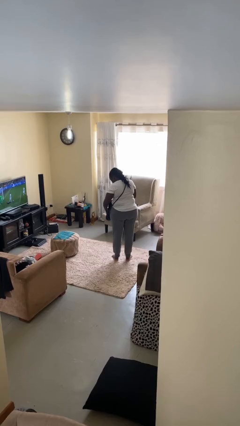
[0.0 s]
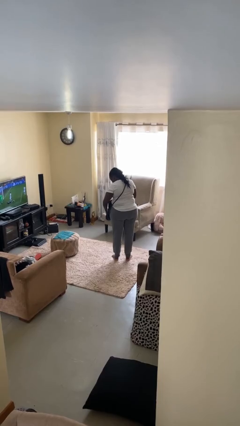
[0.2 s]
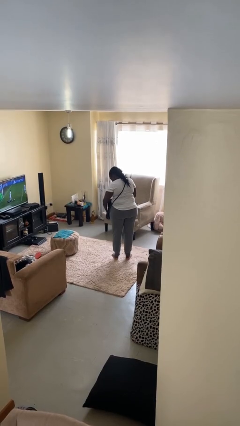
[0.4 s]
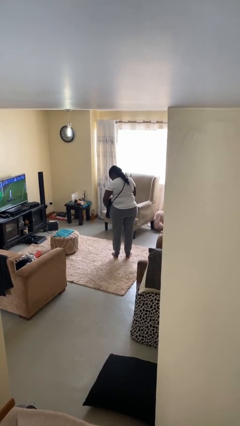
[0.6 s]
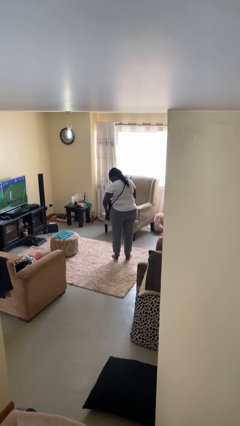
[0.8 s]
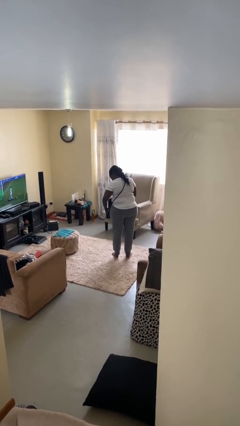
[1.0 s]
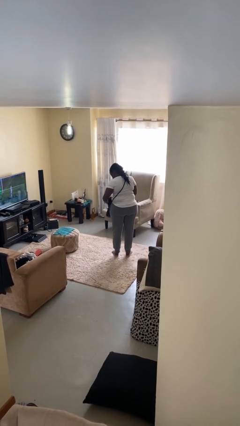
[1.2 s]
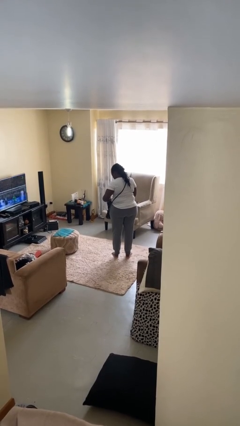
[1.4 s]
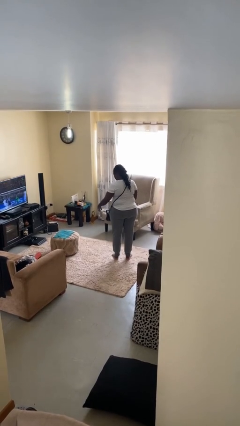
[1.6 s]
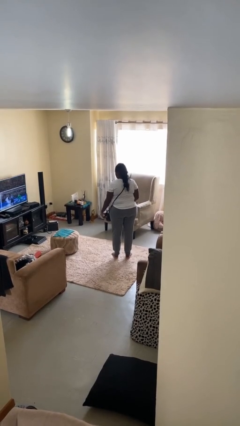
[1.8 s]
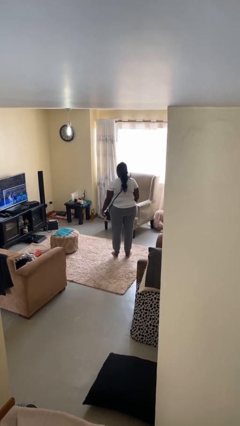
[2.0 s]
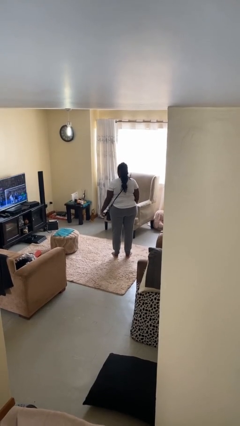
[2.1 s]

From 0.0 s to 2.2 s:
person puts object into purse

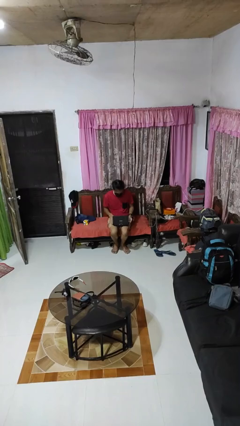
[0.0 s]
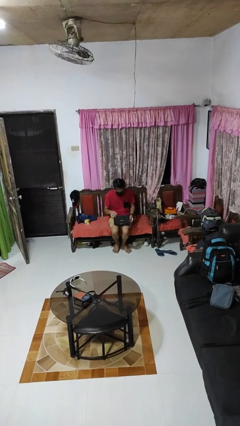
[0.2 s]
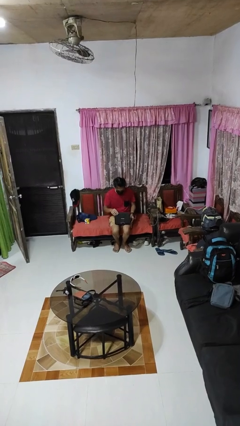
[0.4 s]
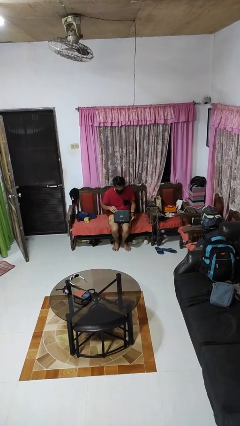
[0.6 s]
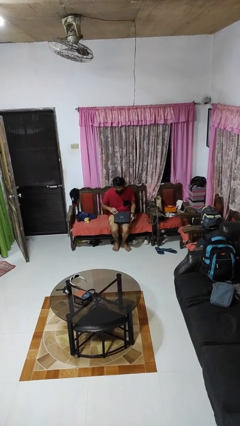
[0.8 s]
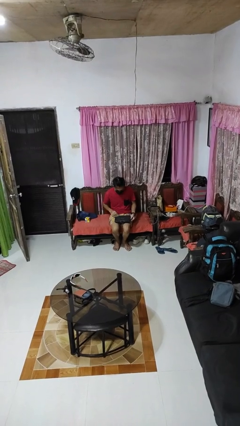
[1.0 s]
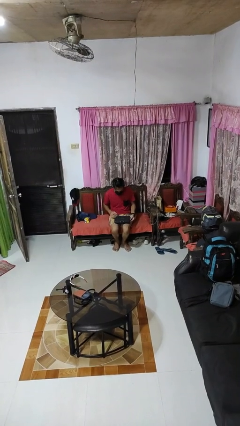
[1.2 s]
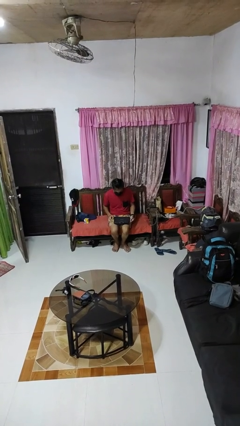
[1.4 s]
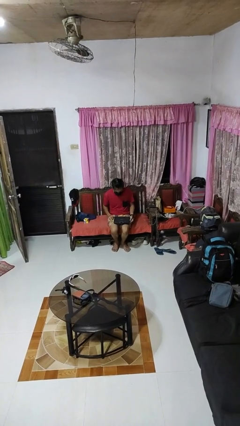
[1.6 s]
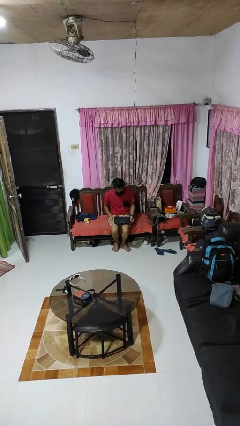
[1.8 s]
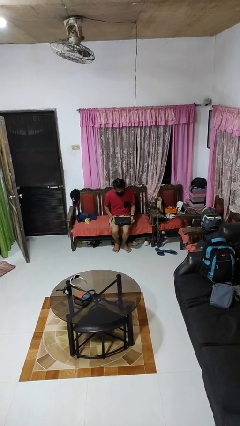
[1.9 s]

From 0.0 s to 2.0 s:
person closes laptop

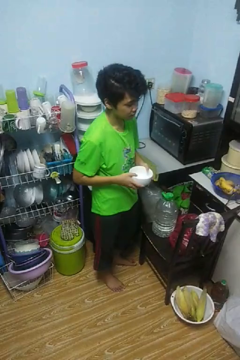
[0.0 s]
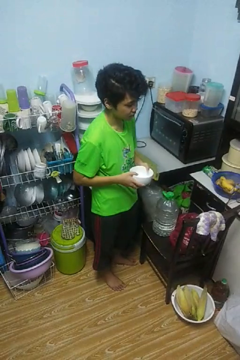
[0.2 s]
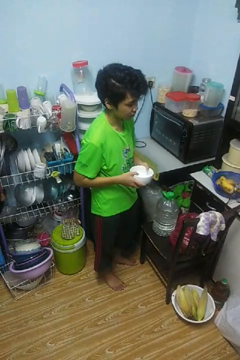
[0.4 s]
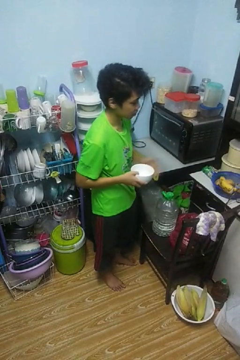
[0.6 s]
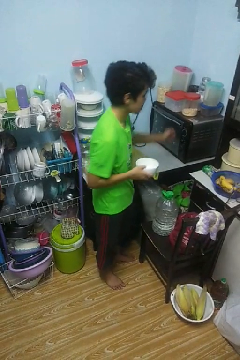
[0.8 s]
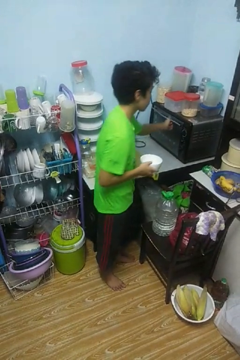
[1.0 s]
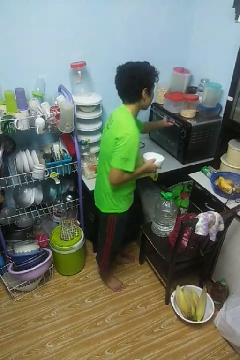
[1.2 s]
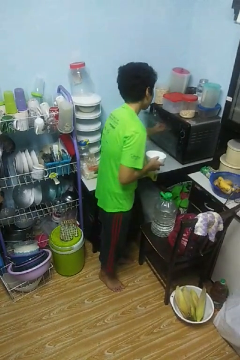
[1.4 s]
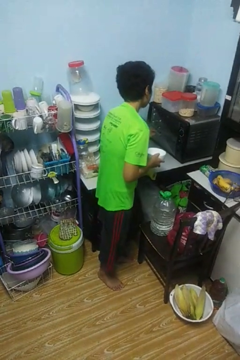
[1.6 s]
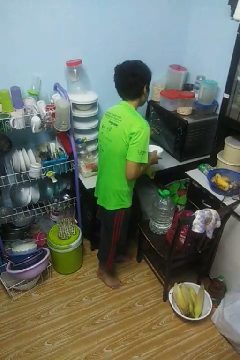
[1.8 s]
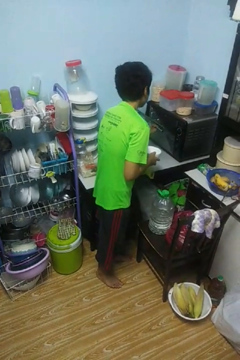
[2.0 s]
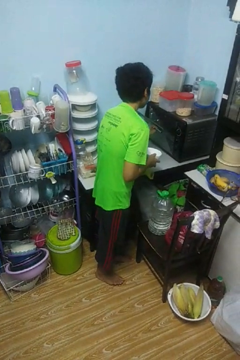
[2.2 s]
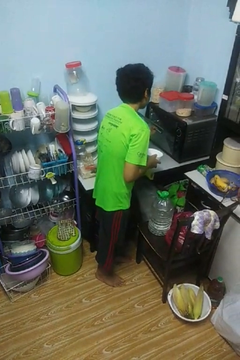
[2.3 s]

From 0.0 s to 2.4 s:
person opens microwave

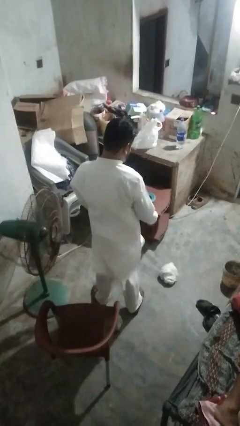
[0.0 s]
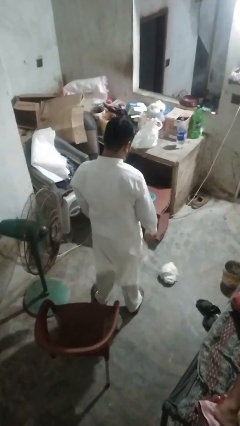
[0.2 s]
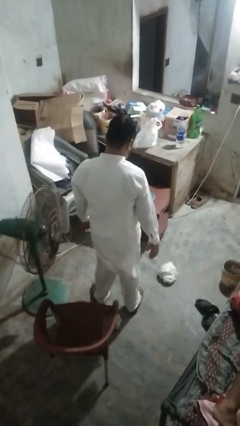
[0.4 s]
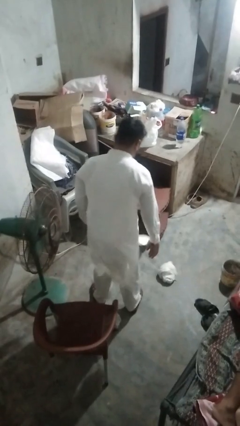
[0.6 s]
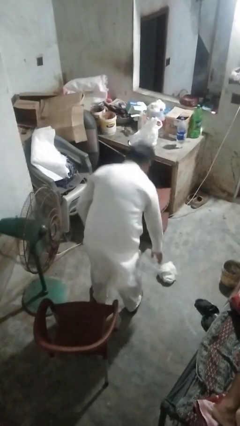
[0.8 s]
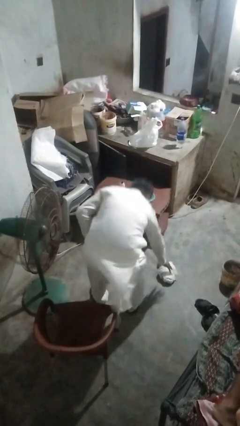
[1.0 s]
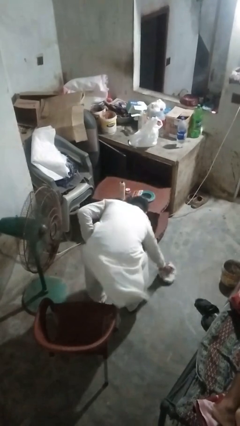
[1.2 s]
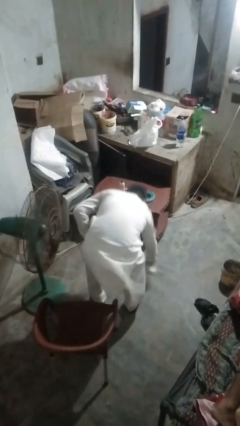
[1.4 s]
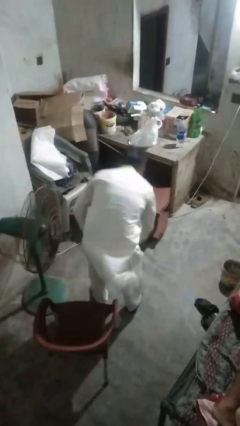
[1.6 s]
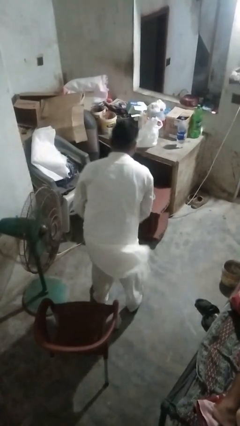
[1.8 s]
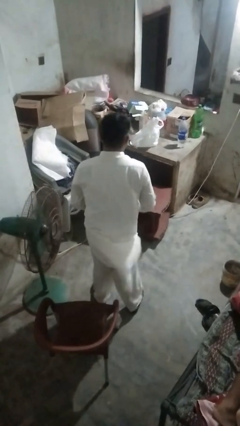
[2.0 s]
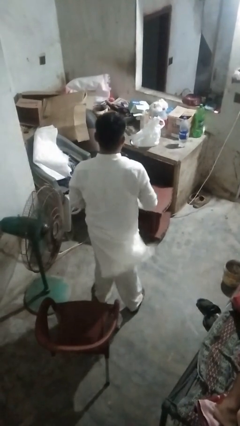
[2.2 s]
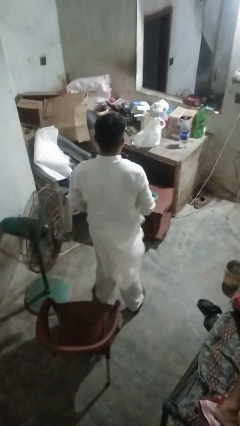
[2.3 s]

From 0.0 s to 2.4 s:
person picks up object from floor

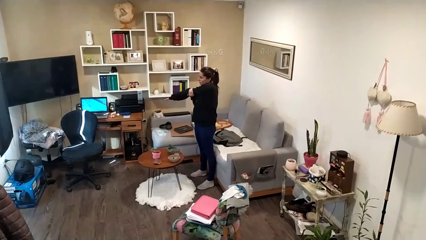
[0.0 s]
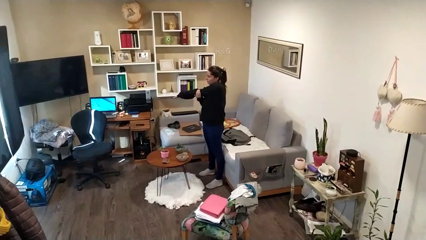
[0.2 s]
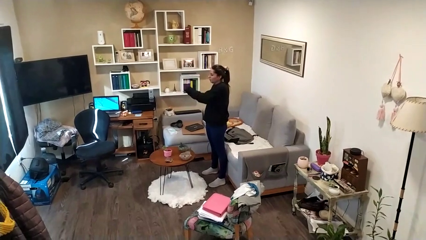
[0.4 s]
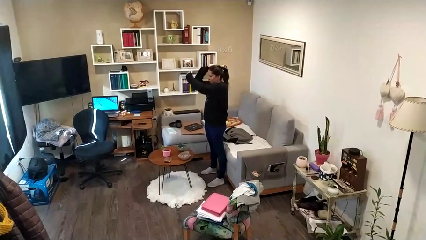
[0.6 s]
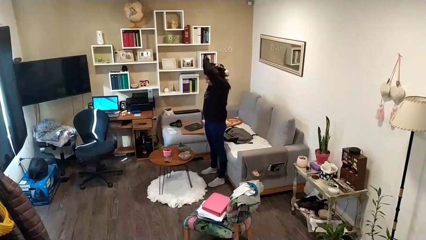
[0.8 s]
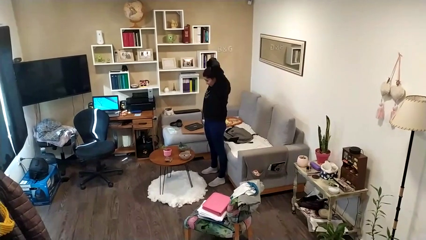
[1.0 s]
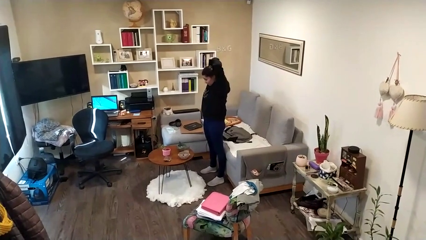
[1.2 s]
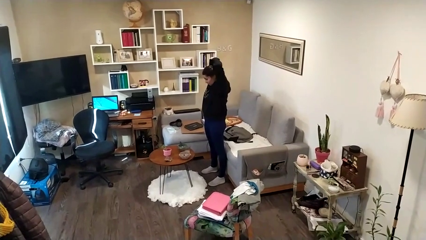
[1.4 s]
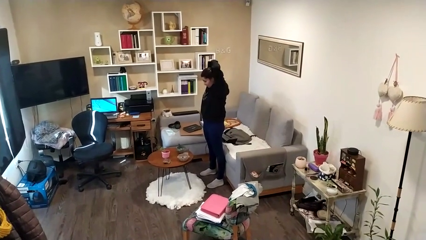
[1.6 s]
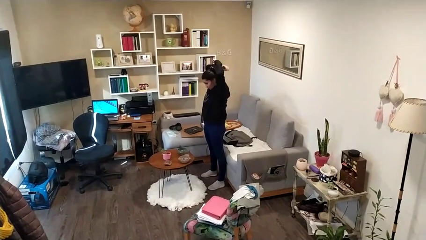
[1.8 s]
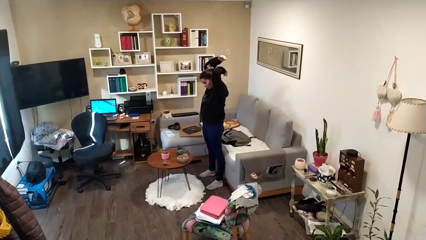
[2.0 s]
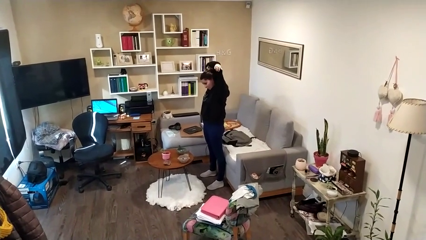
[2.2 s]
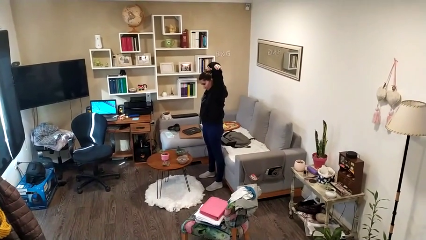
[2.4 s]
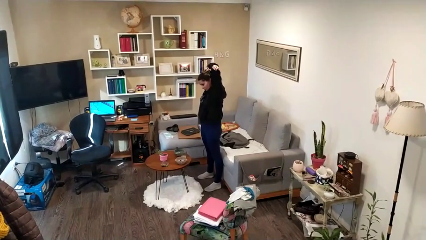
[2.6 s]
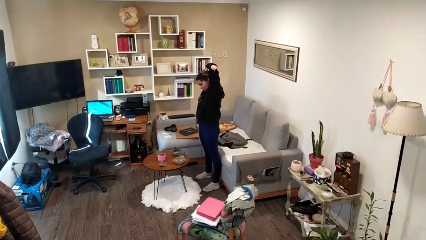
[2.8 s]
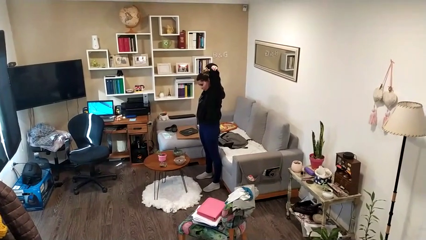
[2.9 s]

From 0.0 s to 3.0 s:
person stretches arms over head

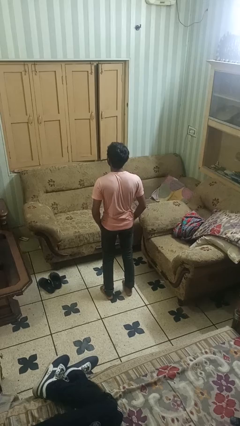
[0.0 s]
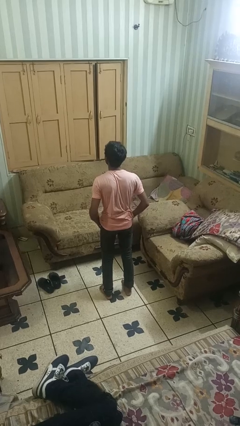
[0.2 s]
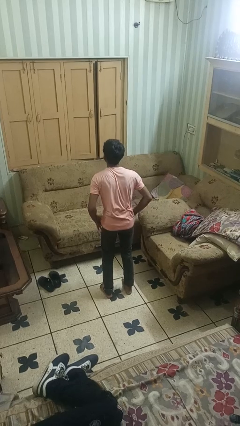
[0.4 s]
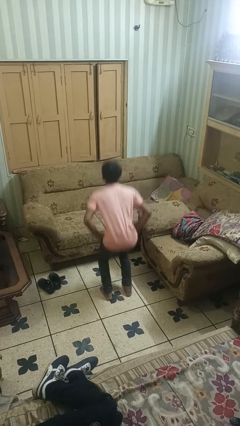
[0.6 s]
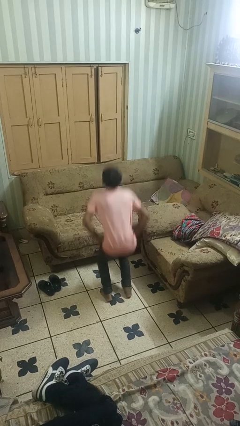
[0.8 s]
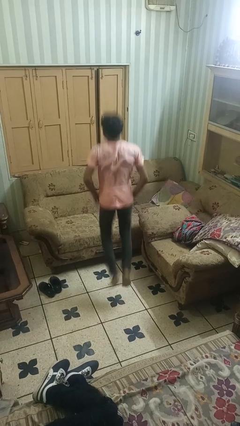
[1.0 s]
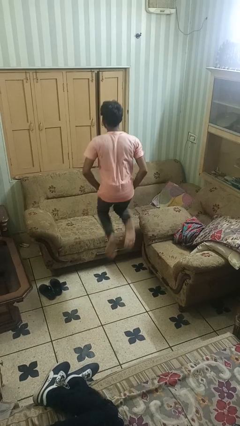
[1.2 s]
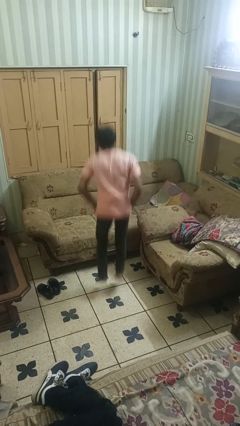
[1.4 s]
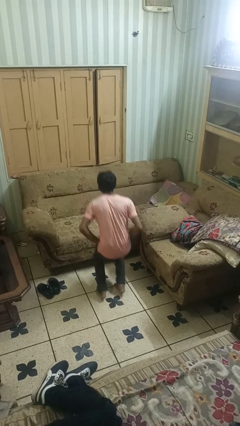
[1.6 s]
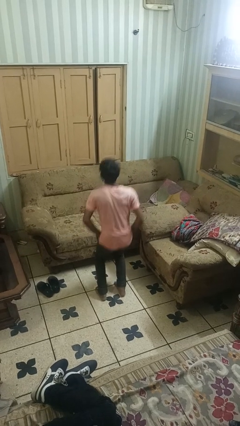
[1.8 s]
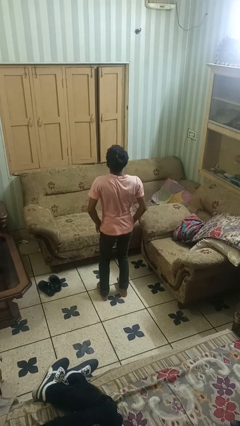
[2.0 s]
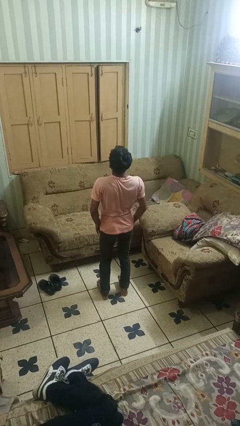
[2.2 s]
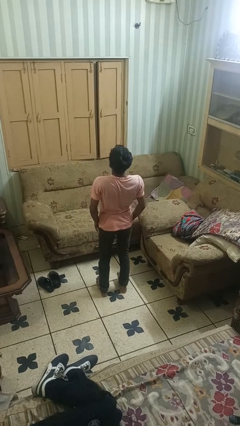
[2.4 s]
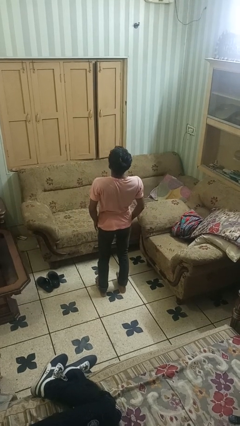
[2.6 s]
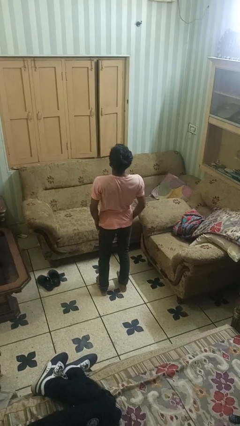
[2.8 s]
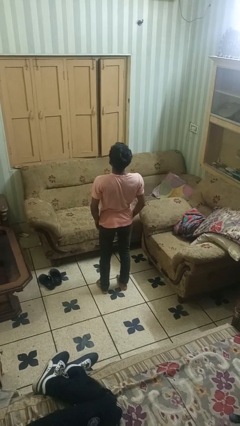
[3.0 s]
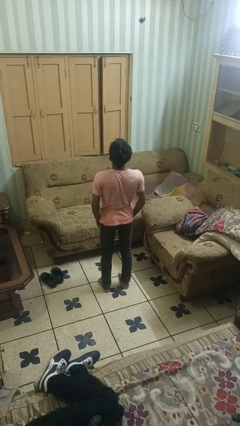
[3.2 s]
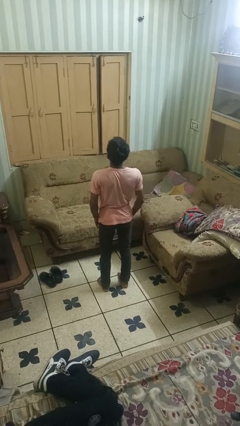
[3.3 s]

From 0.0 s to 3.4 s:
person jumps

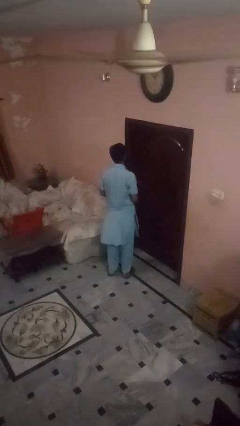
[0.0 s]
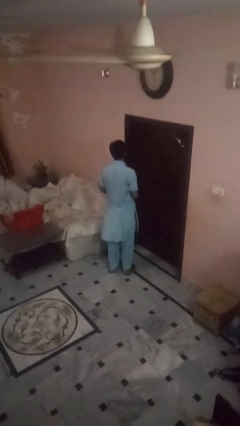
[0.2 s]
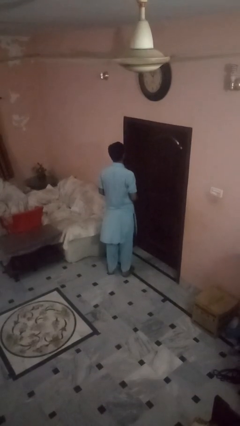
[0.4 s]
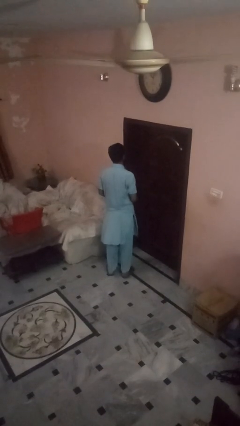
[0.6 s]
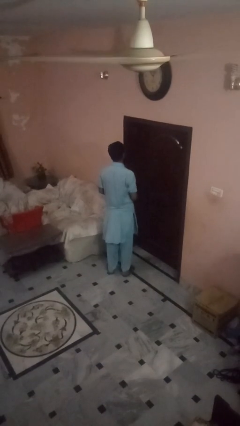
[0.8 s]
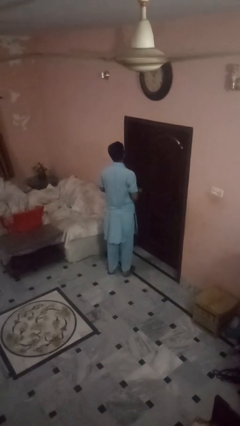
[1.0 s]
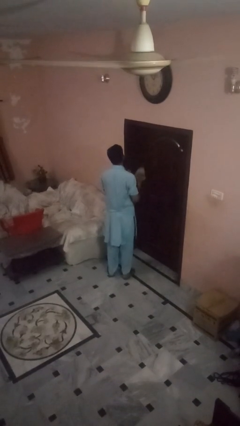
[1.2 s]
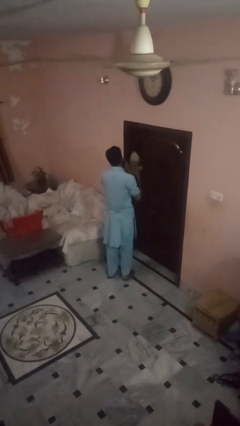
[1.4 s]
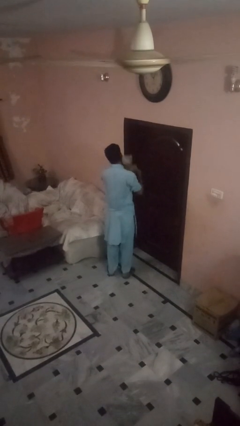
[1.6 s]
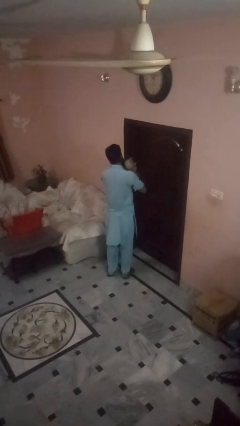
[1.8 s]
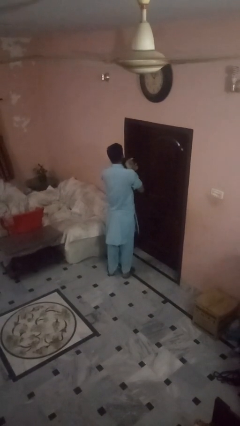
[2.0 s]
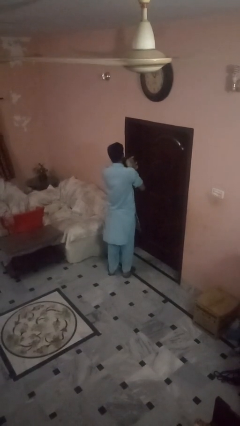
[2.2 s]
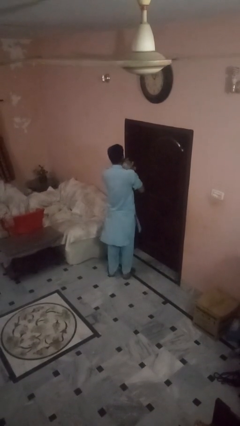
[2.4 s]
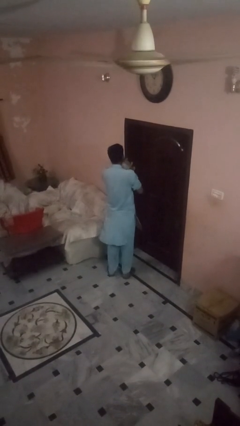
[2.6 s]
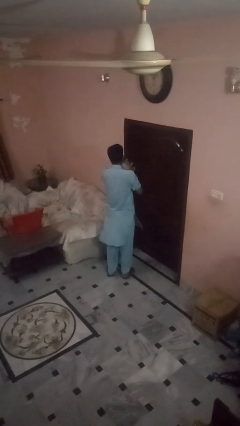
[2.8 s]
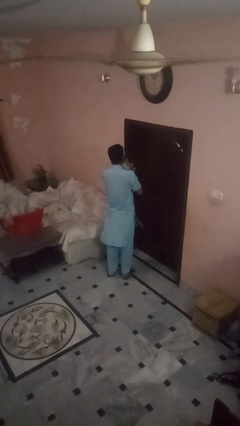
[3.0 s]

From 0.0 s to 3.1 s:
person hugs stuffed animal
